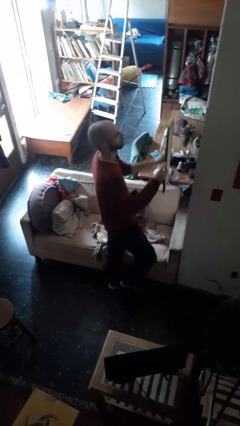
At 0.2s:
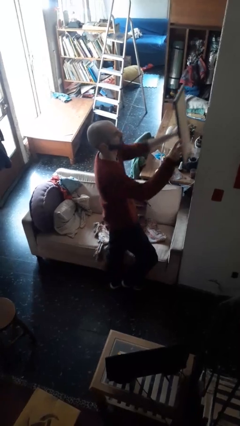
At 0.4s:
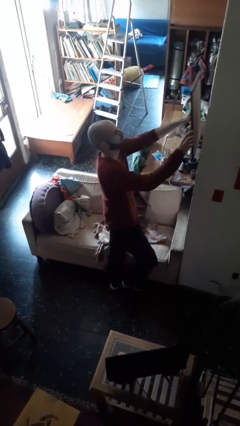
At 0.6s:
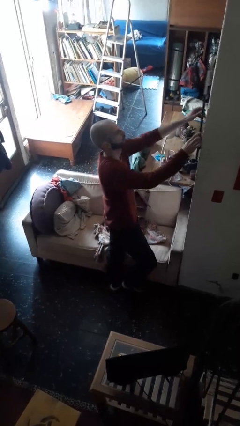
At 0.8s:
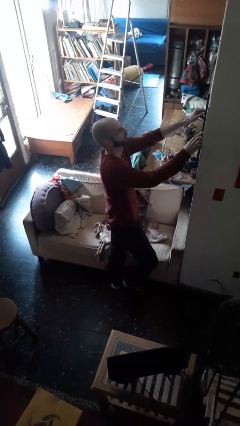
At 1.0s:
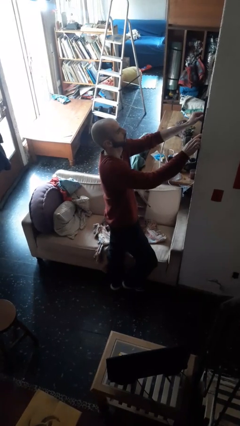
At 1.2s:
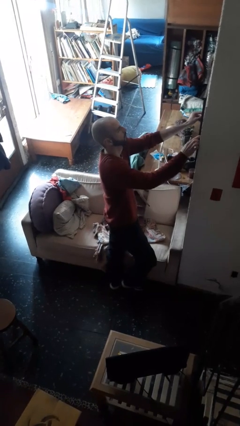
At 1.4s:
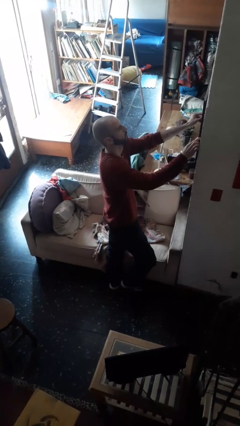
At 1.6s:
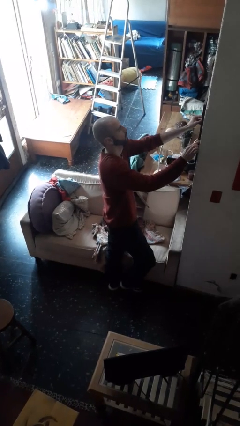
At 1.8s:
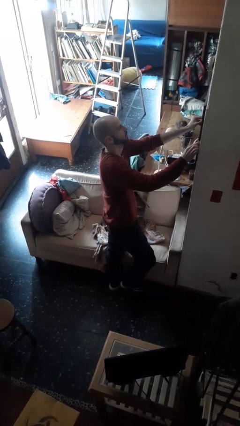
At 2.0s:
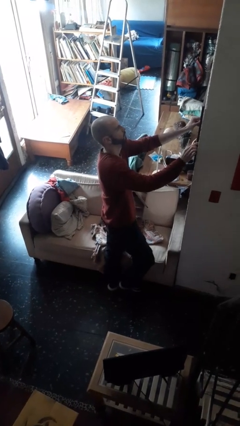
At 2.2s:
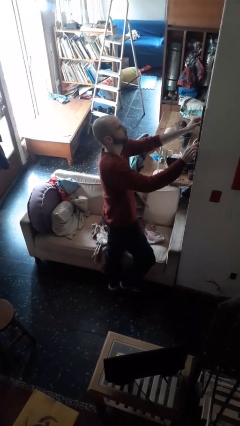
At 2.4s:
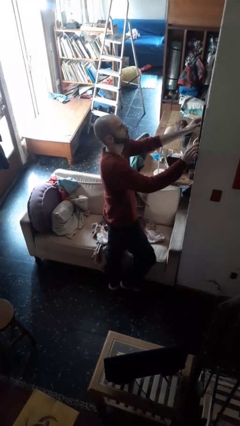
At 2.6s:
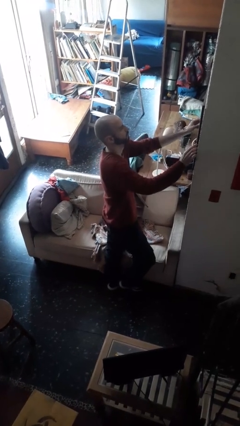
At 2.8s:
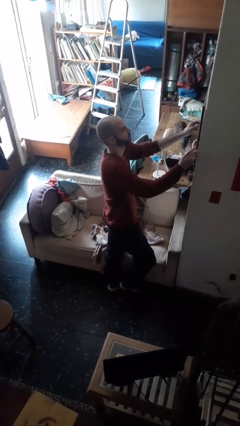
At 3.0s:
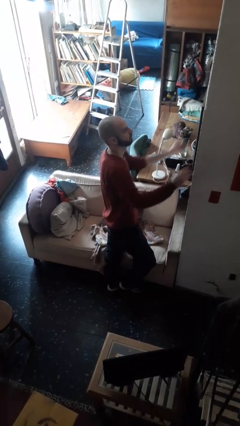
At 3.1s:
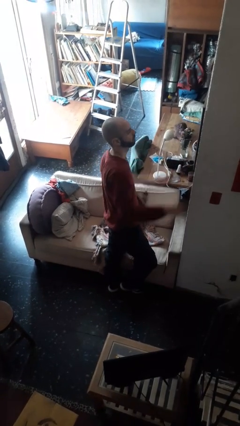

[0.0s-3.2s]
person puts up picture frame

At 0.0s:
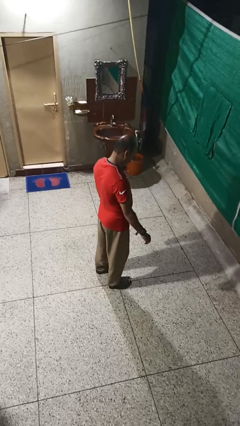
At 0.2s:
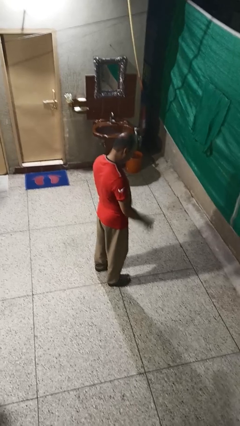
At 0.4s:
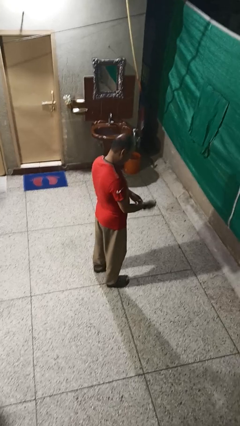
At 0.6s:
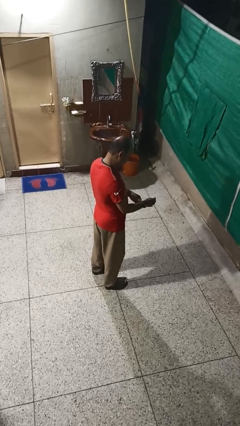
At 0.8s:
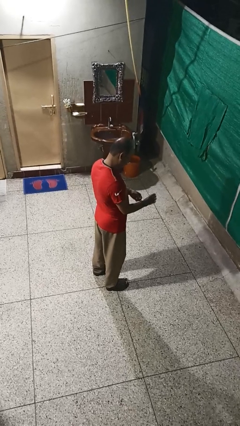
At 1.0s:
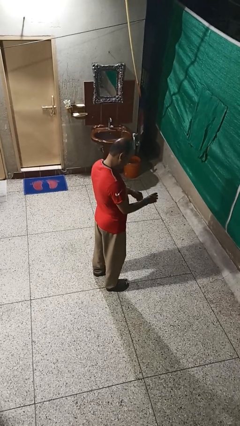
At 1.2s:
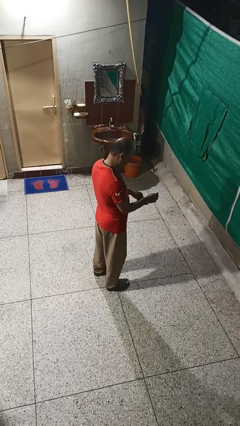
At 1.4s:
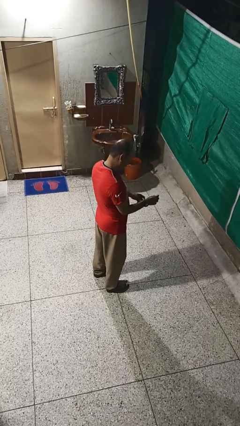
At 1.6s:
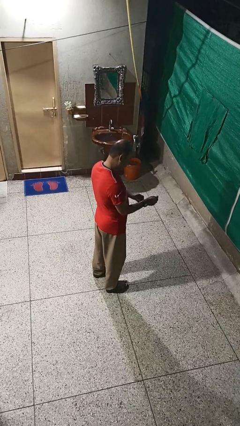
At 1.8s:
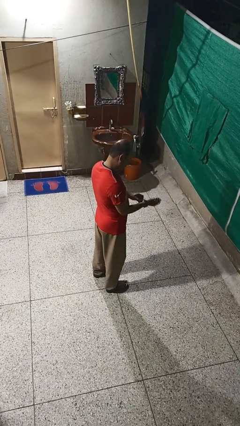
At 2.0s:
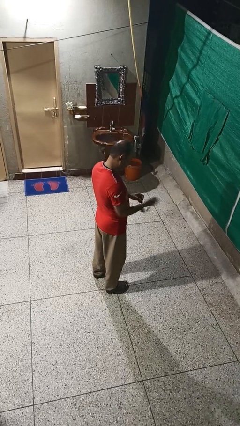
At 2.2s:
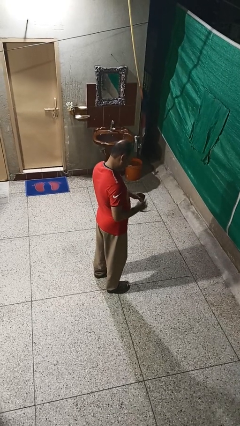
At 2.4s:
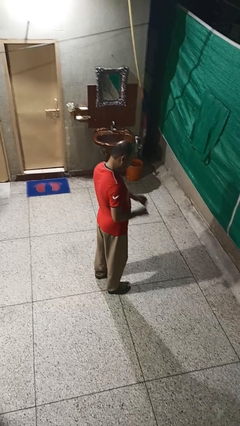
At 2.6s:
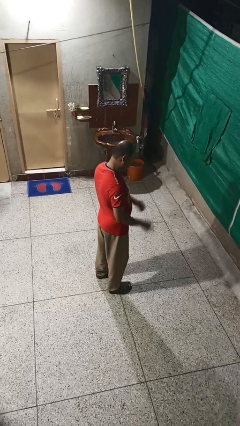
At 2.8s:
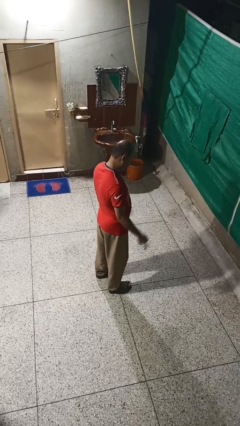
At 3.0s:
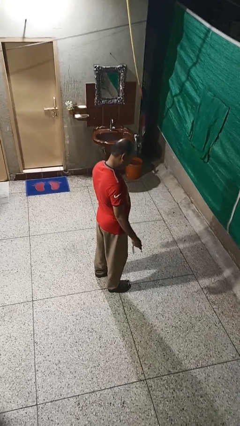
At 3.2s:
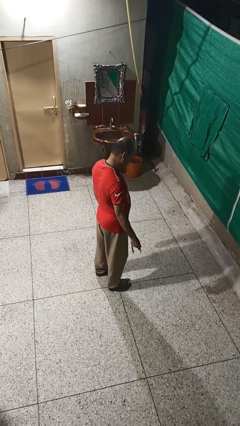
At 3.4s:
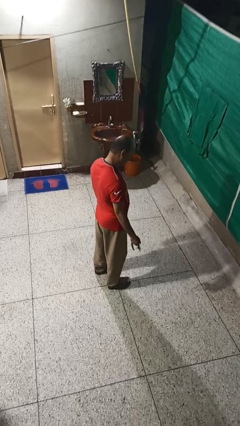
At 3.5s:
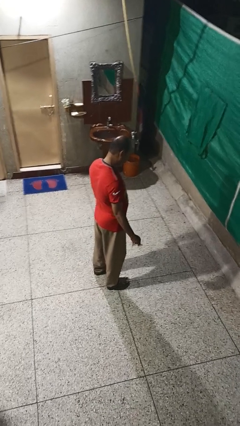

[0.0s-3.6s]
person takes off wristwatch

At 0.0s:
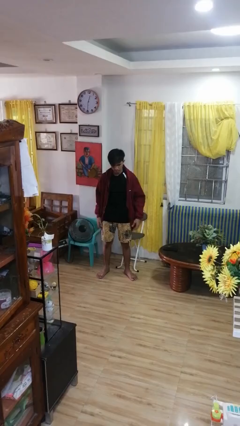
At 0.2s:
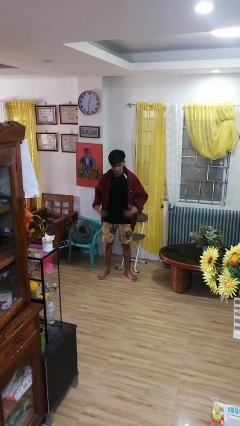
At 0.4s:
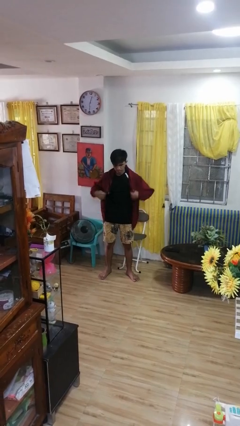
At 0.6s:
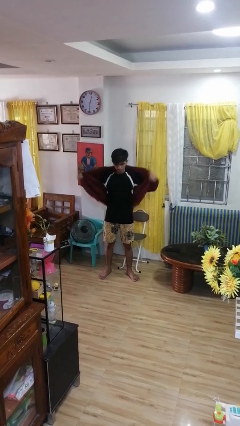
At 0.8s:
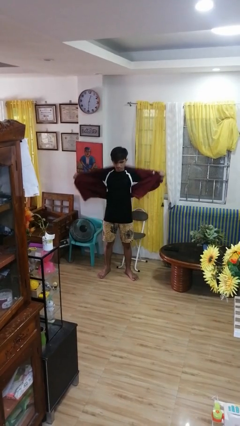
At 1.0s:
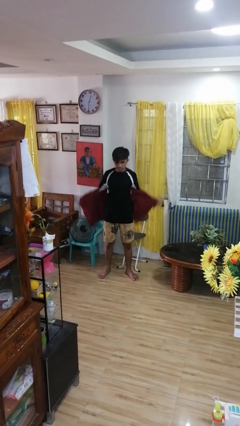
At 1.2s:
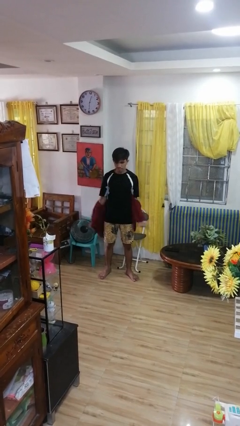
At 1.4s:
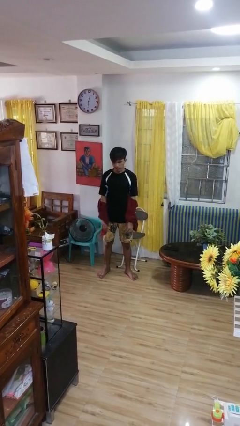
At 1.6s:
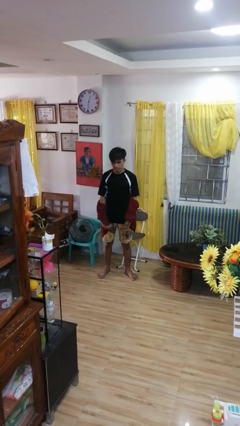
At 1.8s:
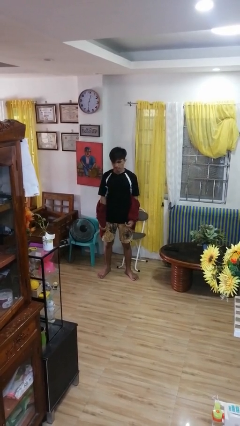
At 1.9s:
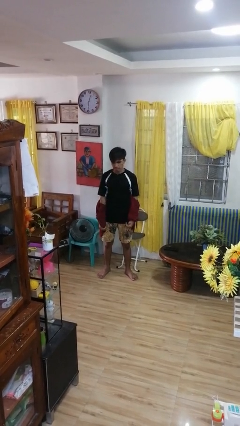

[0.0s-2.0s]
person takes off jacket

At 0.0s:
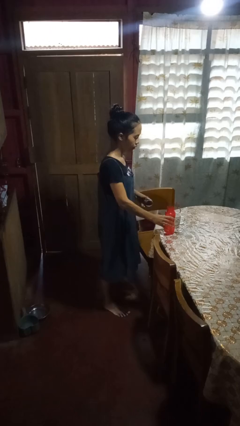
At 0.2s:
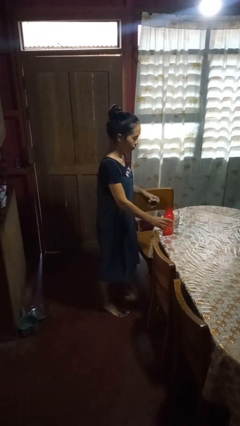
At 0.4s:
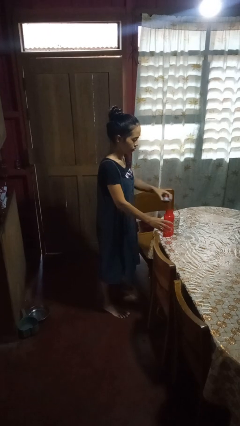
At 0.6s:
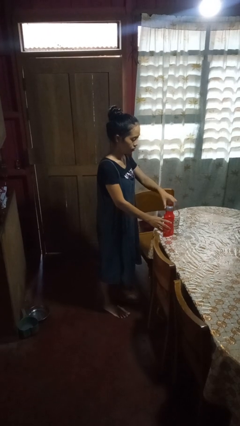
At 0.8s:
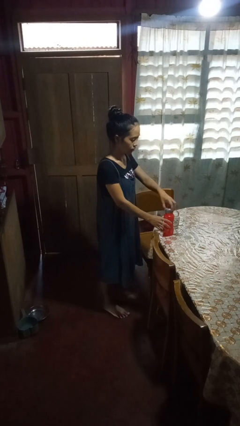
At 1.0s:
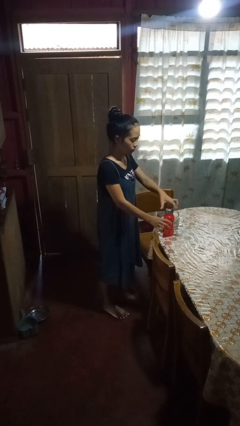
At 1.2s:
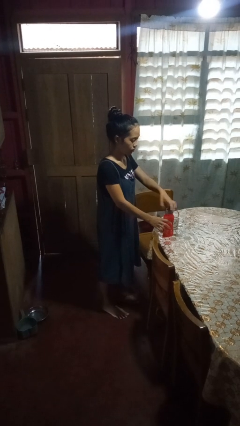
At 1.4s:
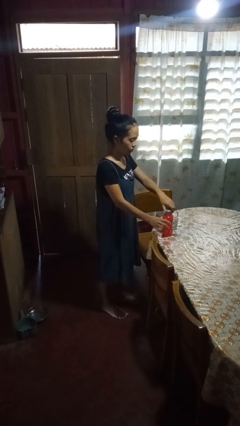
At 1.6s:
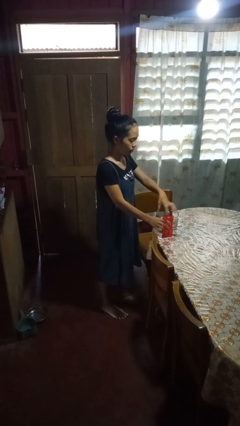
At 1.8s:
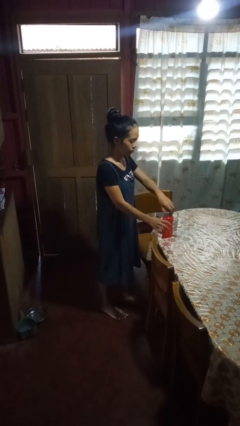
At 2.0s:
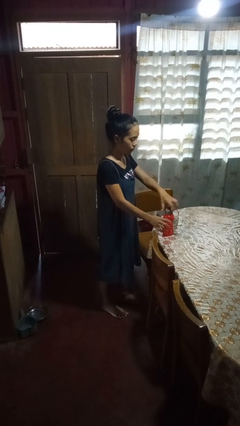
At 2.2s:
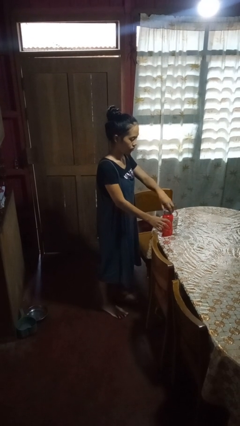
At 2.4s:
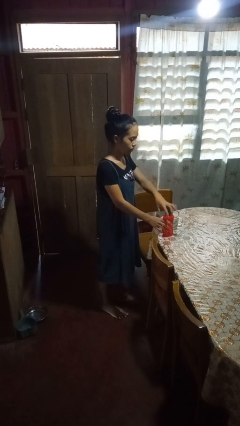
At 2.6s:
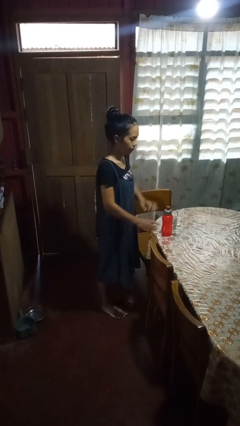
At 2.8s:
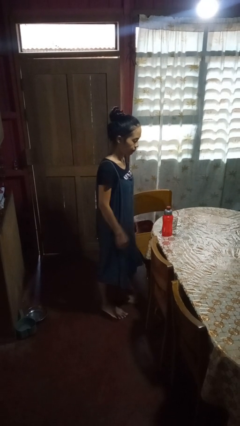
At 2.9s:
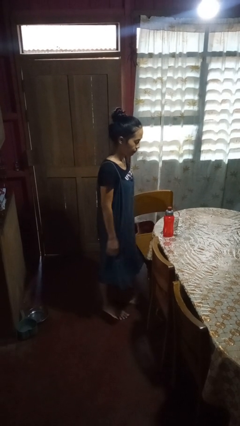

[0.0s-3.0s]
person screws lid to bottle

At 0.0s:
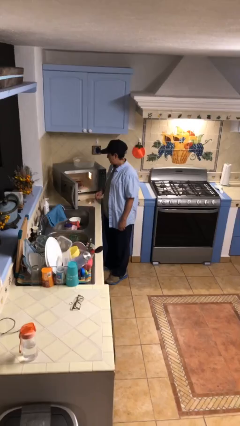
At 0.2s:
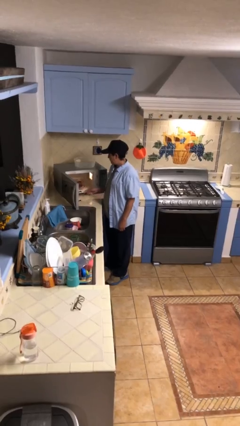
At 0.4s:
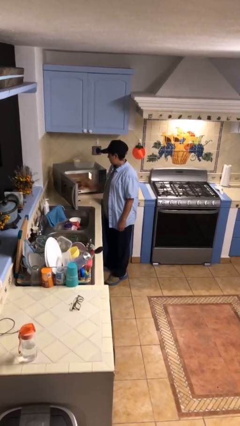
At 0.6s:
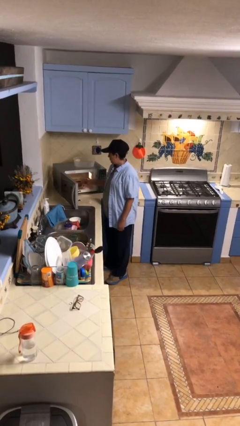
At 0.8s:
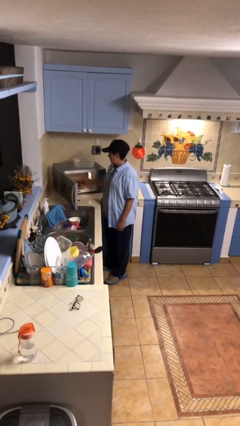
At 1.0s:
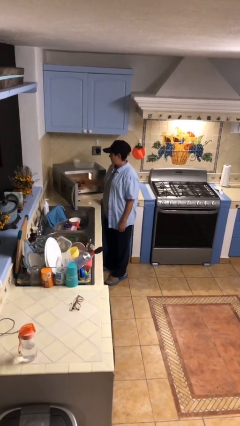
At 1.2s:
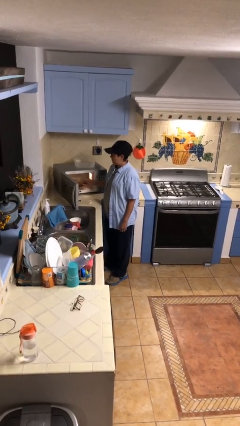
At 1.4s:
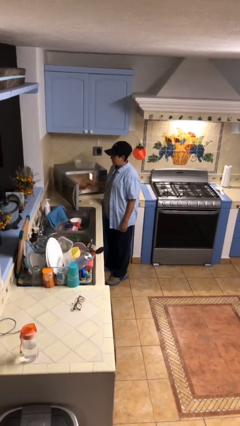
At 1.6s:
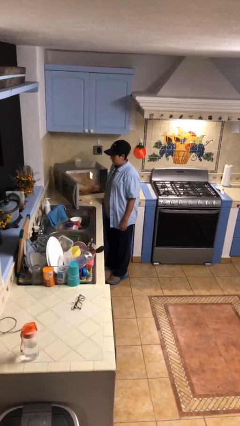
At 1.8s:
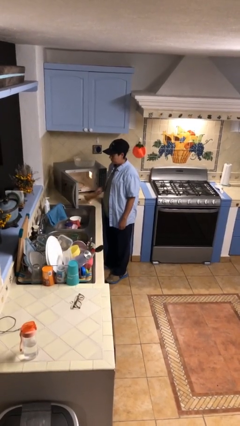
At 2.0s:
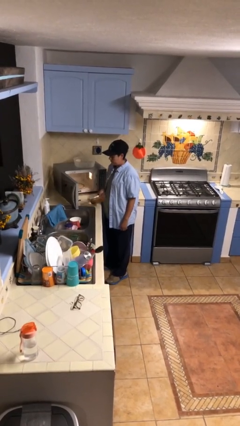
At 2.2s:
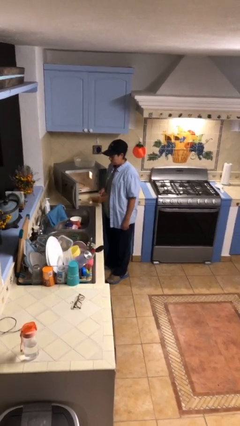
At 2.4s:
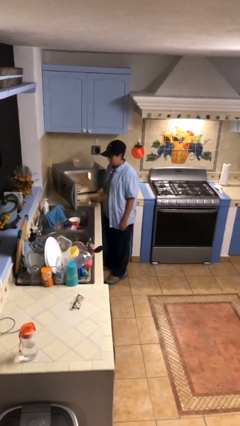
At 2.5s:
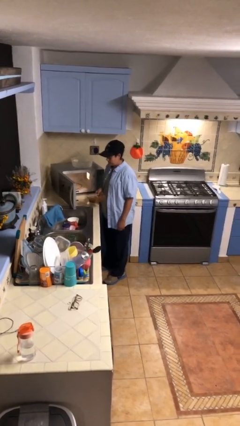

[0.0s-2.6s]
person takes object from microwave

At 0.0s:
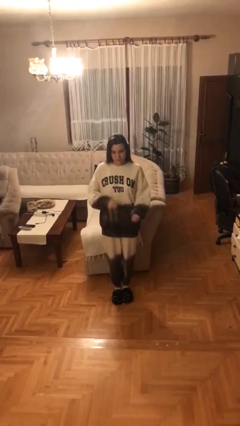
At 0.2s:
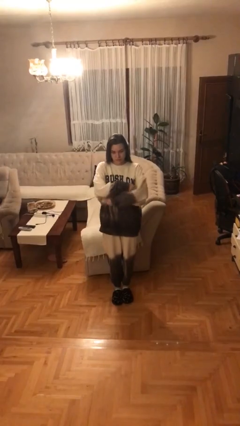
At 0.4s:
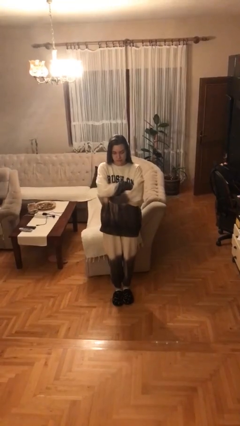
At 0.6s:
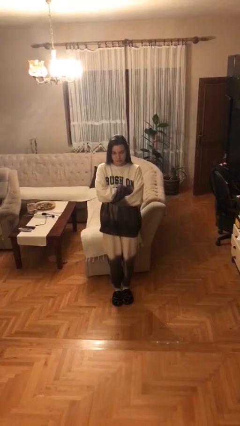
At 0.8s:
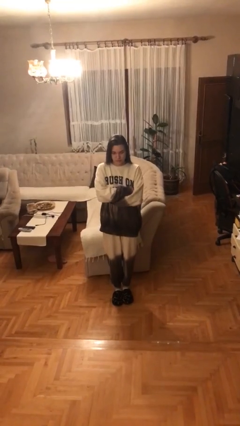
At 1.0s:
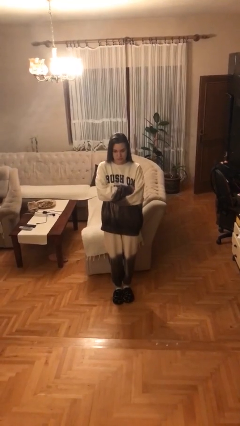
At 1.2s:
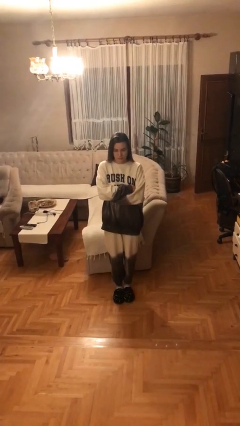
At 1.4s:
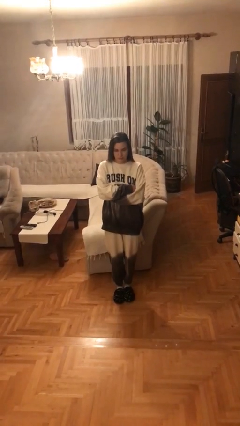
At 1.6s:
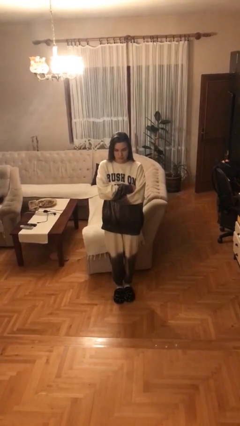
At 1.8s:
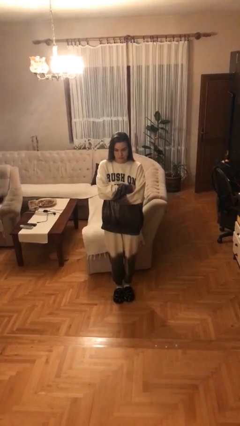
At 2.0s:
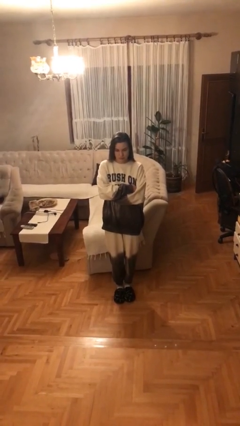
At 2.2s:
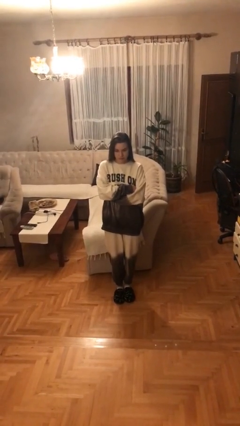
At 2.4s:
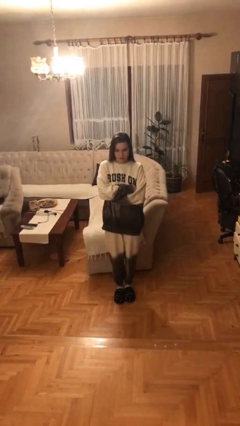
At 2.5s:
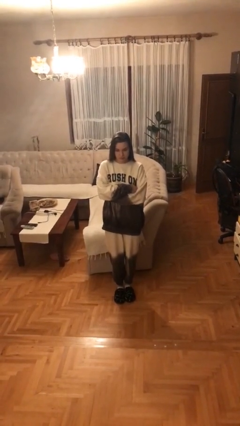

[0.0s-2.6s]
person crosses arms

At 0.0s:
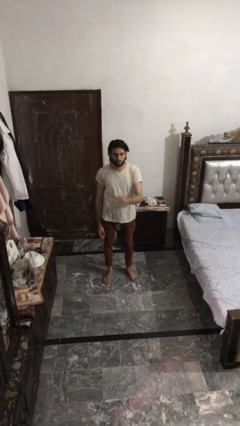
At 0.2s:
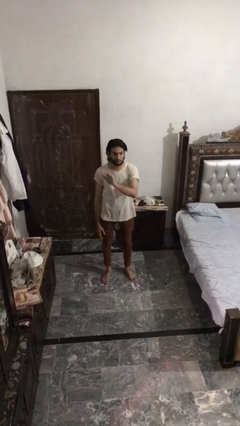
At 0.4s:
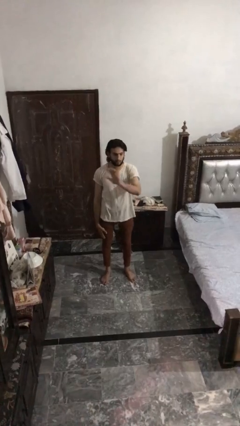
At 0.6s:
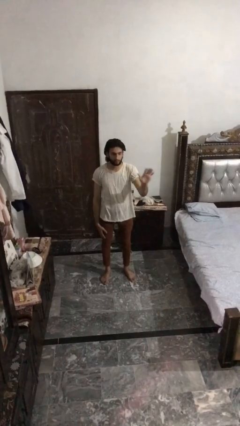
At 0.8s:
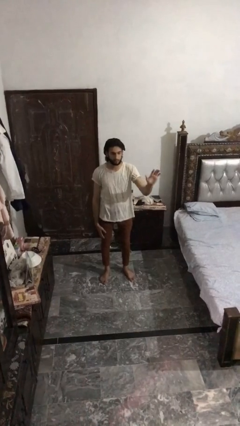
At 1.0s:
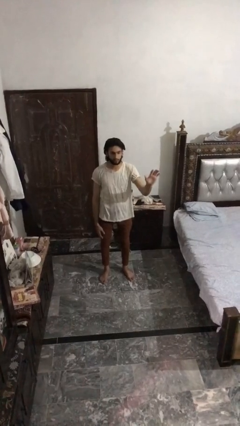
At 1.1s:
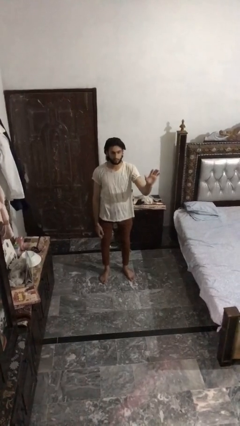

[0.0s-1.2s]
person gestures swipe left
